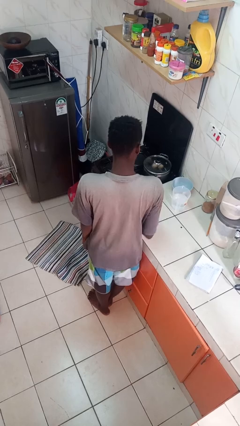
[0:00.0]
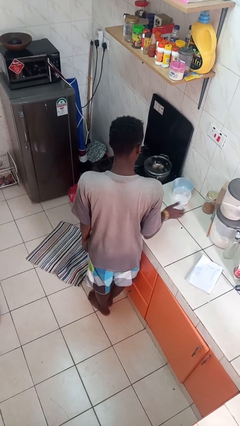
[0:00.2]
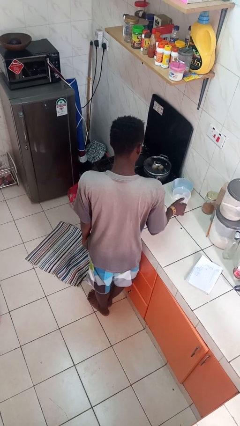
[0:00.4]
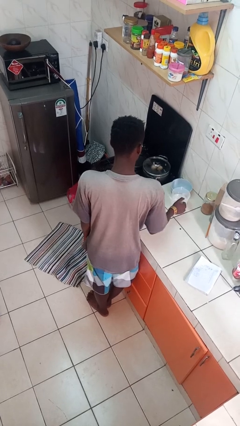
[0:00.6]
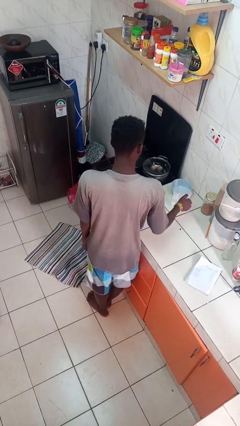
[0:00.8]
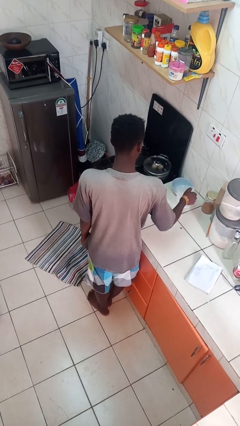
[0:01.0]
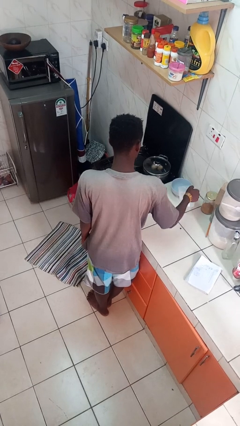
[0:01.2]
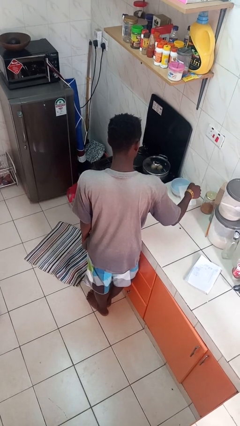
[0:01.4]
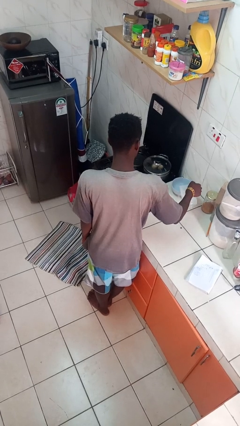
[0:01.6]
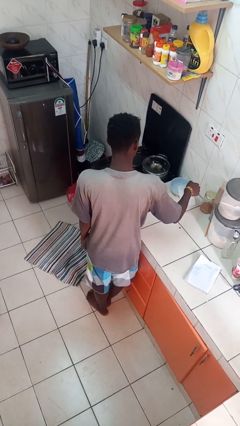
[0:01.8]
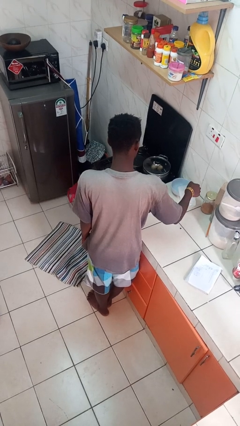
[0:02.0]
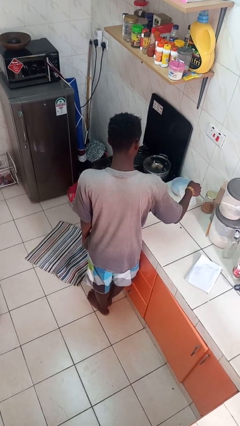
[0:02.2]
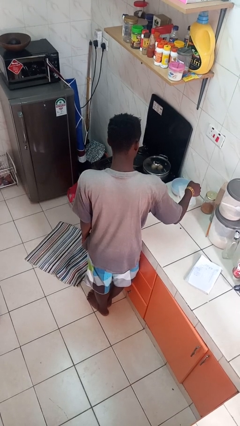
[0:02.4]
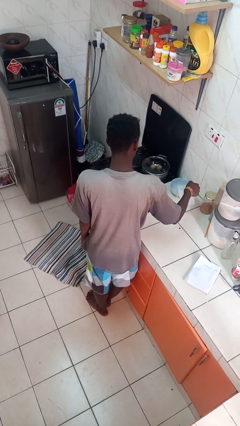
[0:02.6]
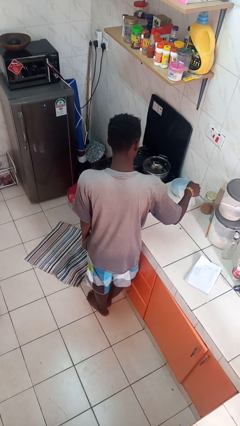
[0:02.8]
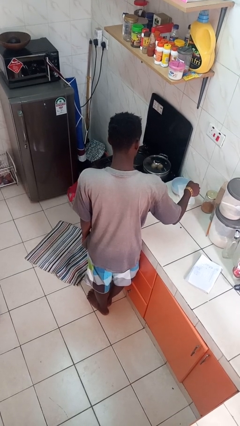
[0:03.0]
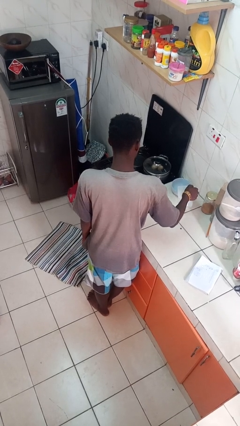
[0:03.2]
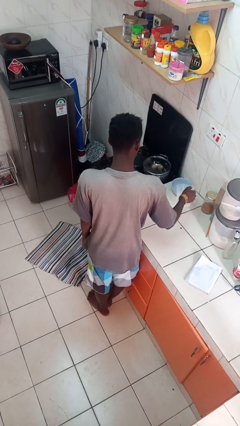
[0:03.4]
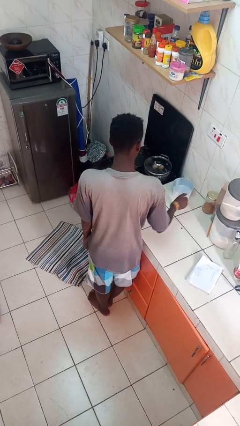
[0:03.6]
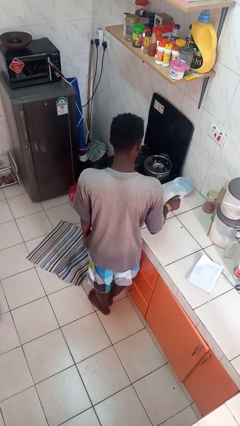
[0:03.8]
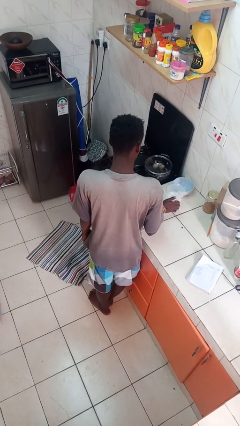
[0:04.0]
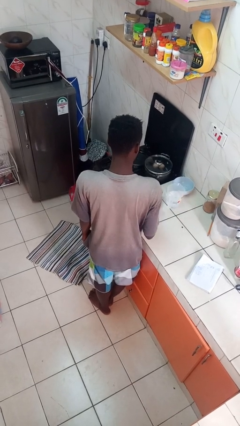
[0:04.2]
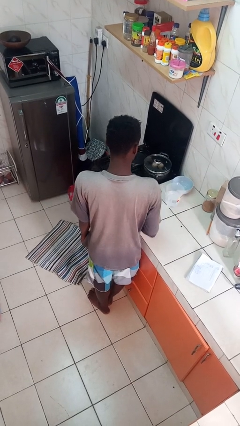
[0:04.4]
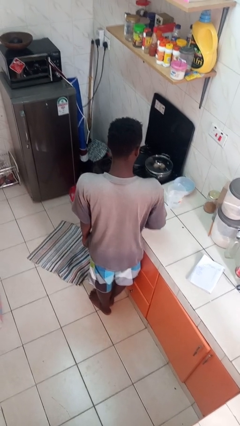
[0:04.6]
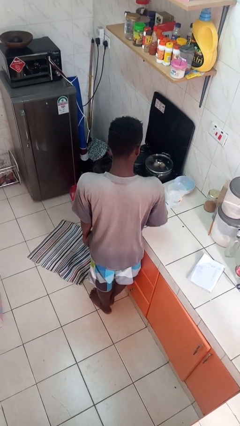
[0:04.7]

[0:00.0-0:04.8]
person pours into bowl

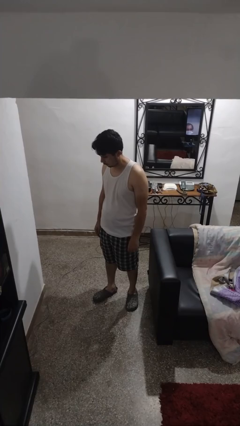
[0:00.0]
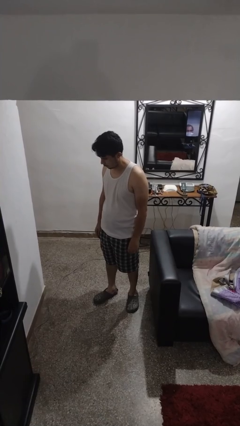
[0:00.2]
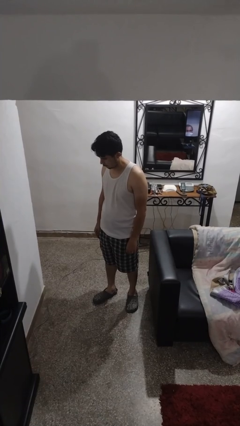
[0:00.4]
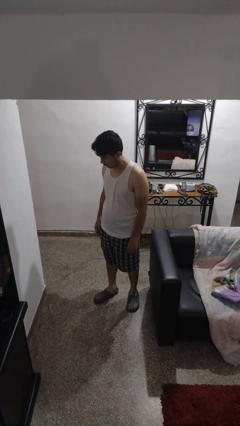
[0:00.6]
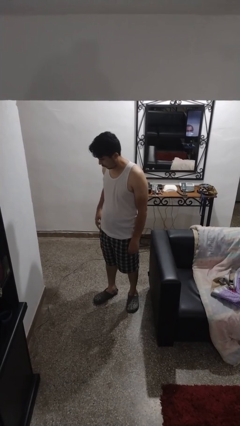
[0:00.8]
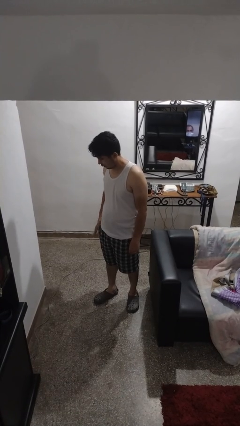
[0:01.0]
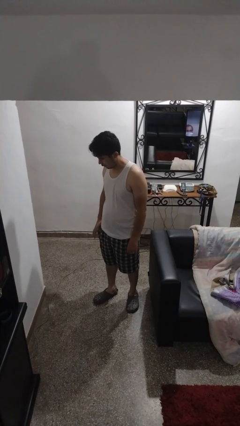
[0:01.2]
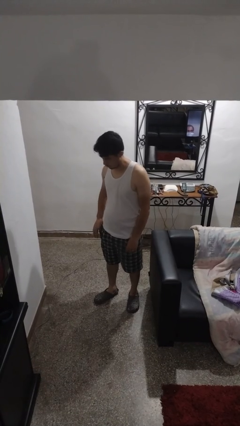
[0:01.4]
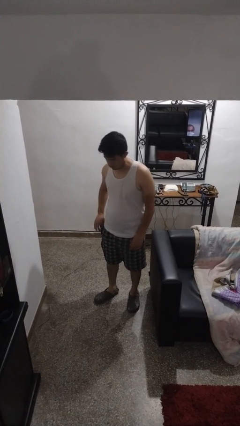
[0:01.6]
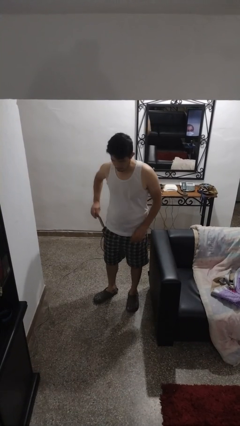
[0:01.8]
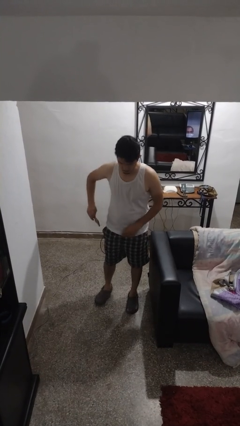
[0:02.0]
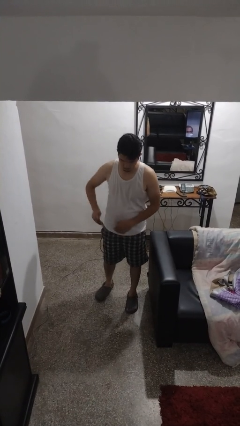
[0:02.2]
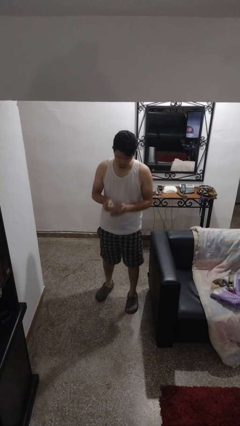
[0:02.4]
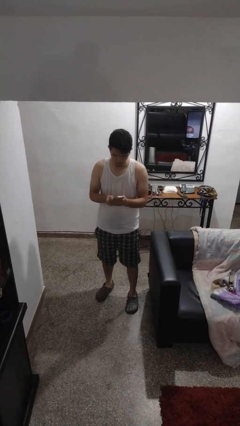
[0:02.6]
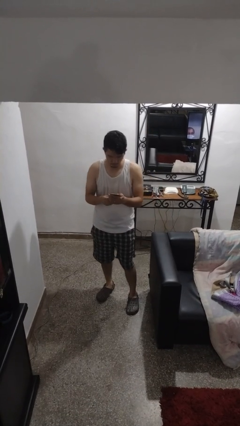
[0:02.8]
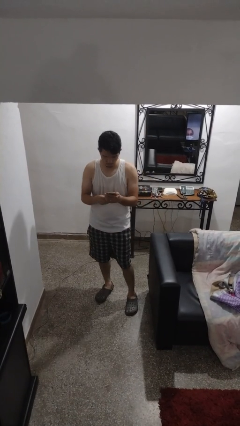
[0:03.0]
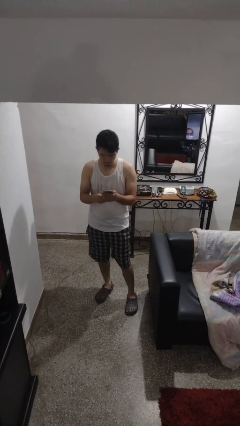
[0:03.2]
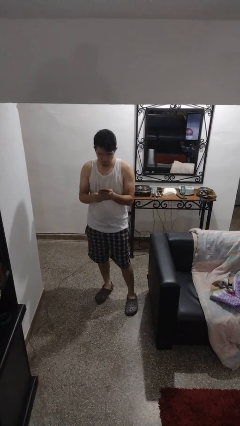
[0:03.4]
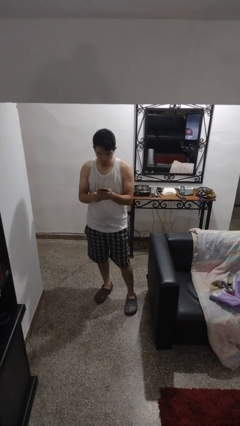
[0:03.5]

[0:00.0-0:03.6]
person takes phone from pocket

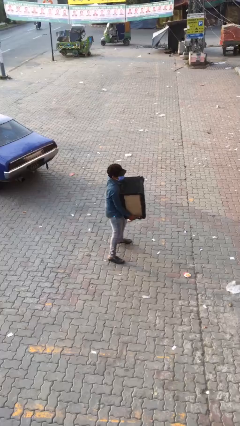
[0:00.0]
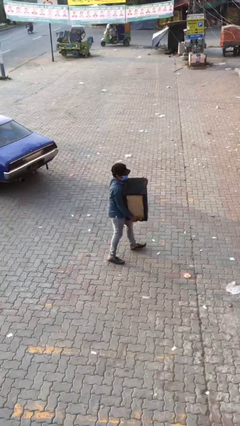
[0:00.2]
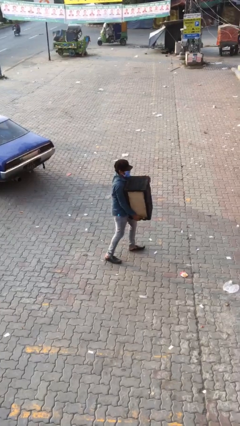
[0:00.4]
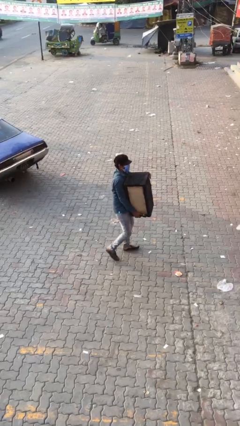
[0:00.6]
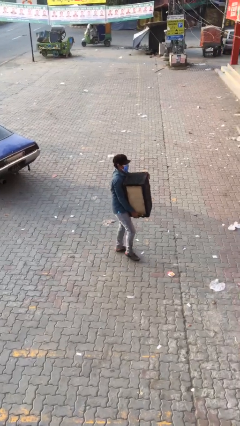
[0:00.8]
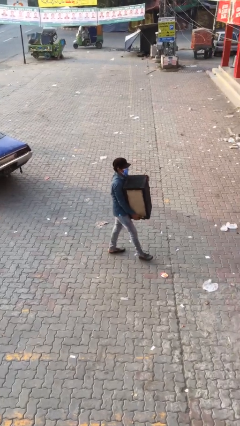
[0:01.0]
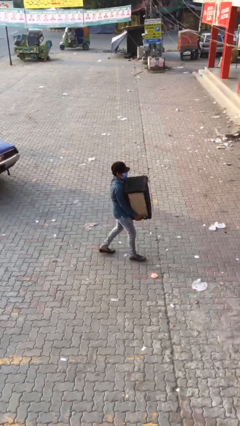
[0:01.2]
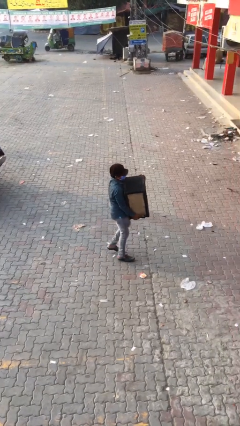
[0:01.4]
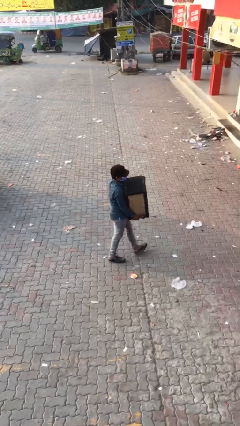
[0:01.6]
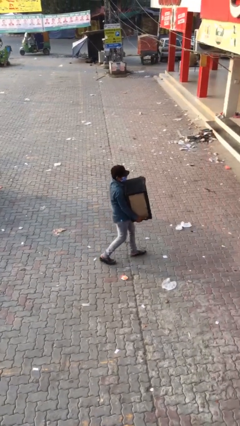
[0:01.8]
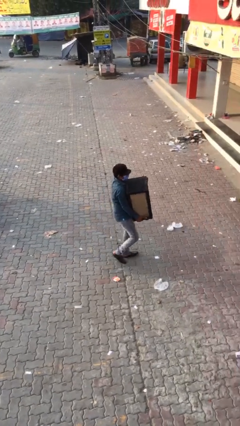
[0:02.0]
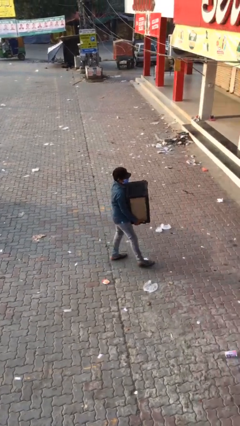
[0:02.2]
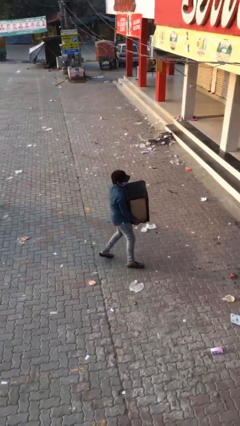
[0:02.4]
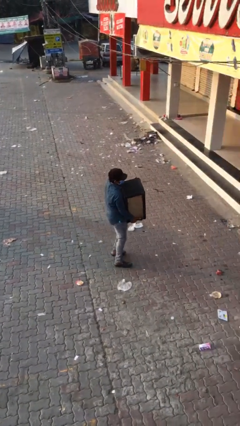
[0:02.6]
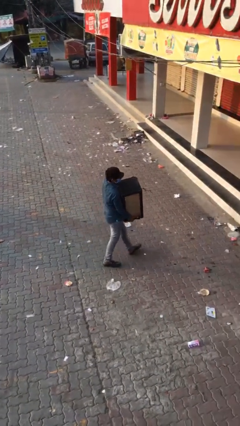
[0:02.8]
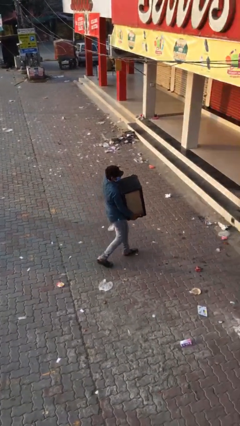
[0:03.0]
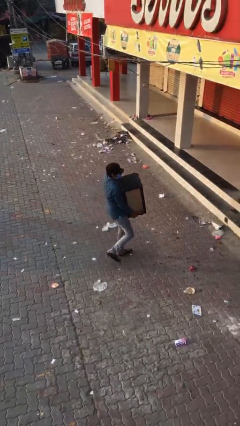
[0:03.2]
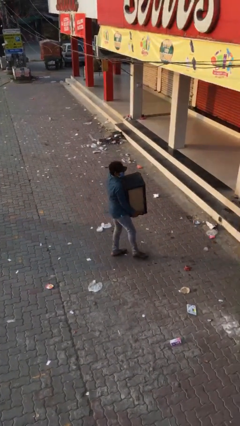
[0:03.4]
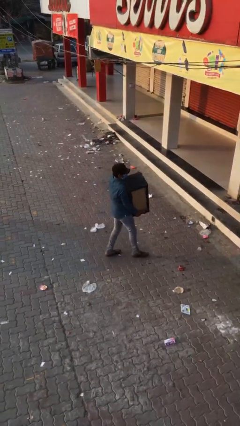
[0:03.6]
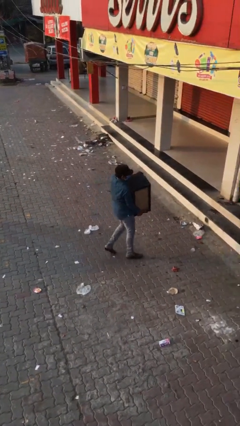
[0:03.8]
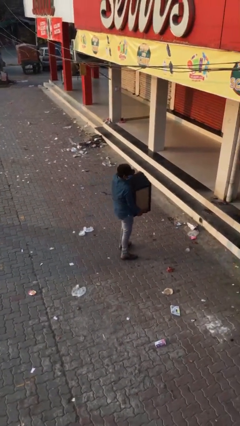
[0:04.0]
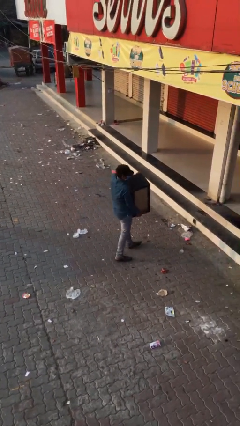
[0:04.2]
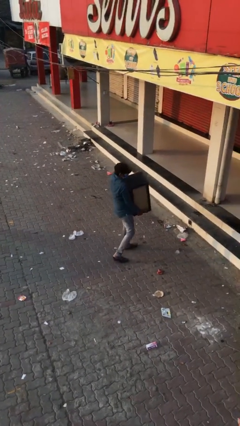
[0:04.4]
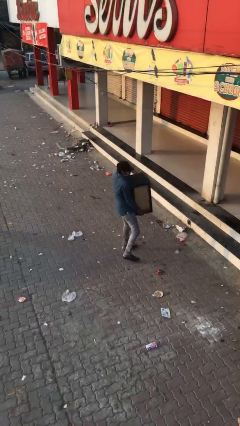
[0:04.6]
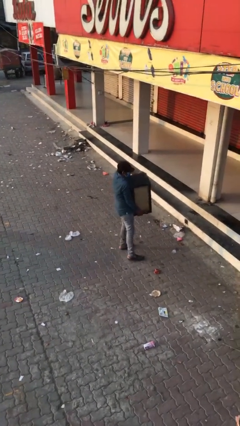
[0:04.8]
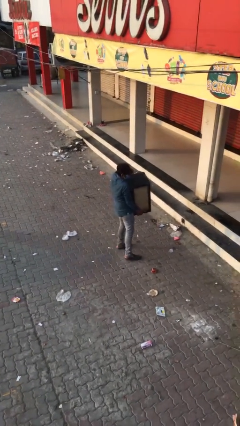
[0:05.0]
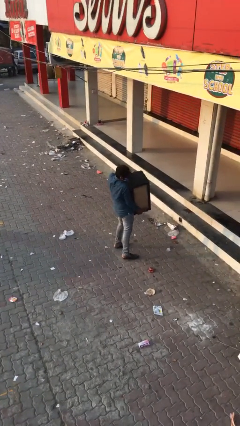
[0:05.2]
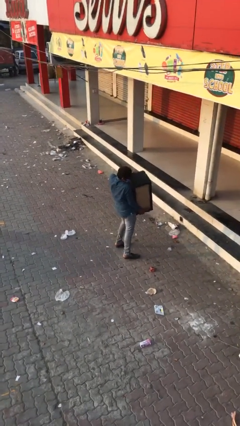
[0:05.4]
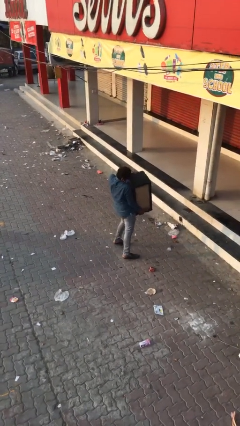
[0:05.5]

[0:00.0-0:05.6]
person carries heavy object

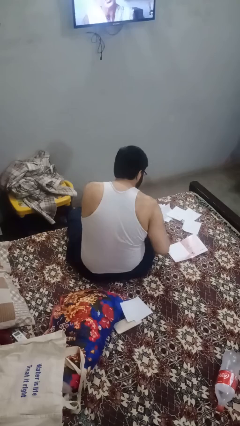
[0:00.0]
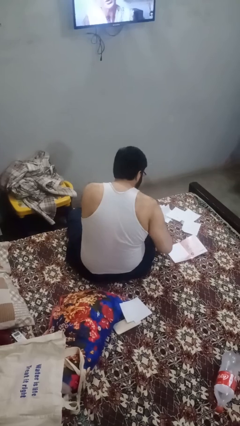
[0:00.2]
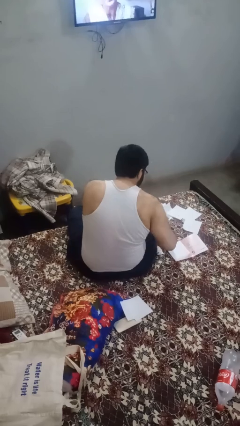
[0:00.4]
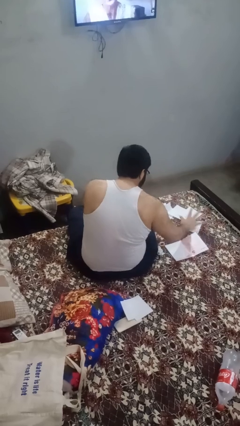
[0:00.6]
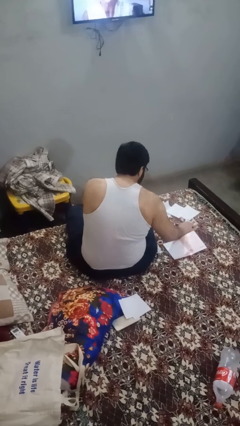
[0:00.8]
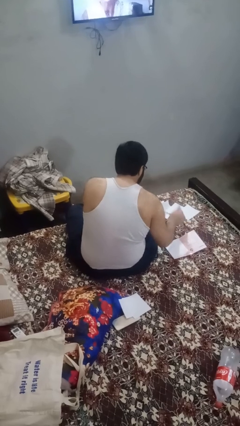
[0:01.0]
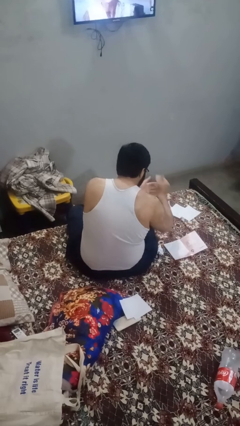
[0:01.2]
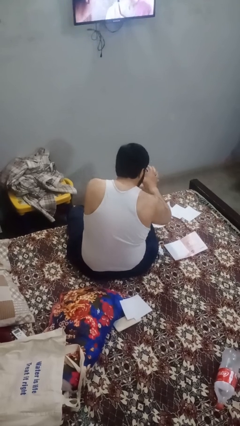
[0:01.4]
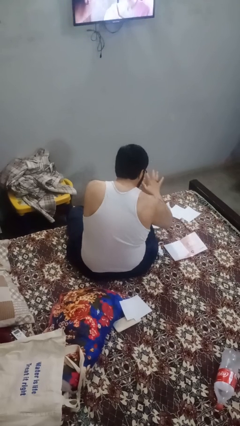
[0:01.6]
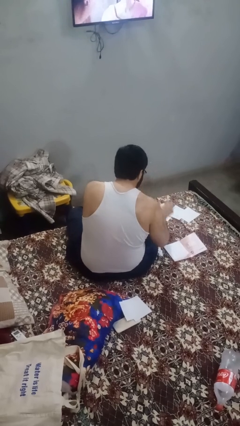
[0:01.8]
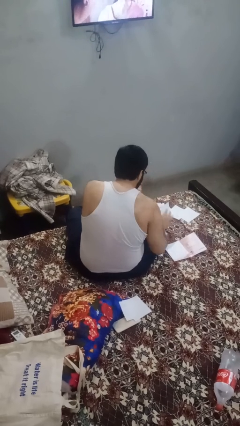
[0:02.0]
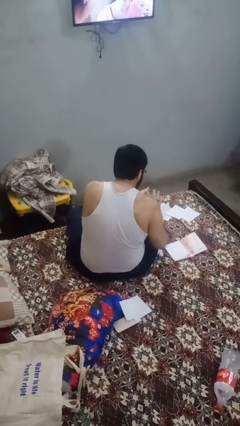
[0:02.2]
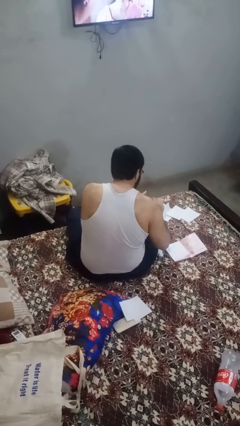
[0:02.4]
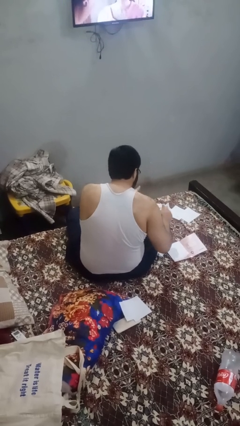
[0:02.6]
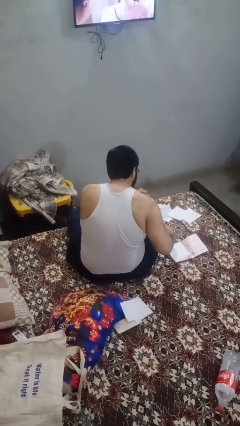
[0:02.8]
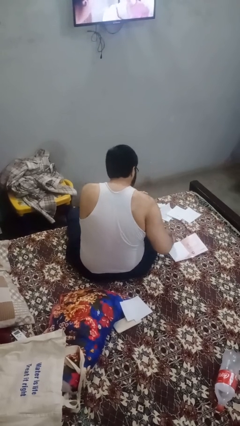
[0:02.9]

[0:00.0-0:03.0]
person crumples paper

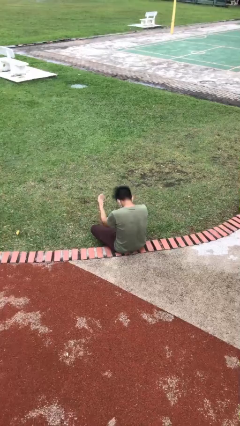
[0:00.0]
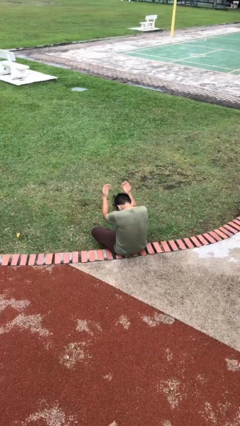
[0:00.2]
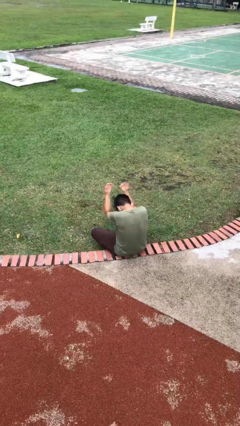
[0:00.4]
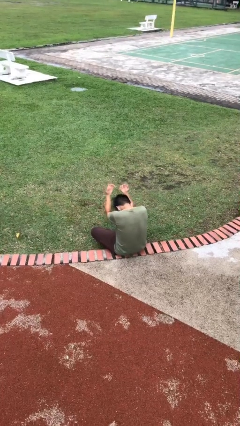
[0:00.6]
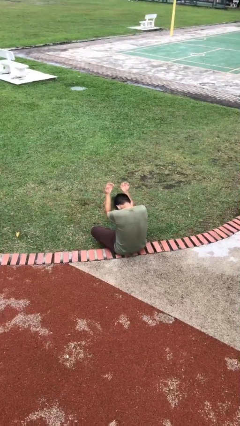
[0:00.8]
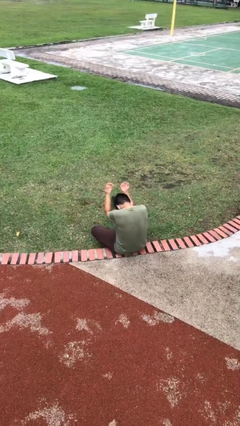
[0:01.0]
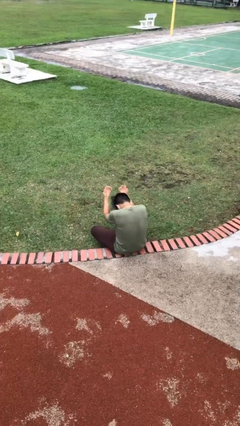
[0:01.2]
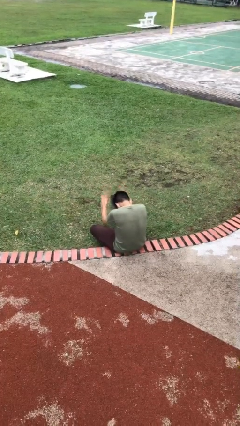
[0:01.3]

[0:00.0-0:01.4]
person prays
